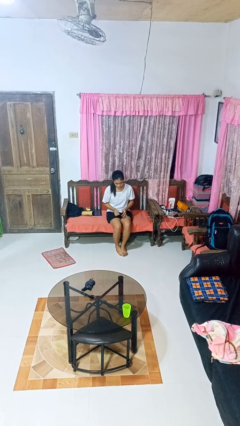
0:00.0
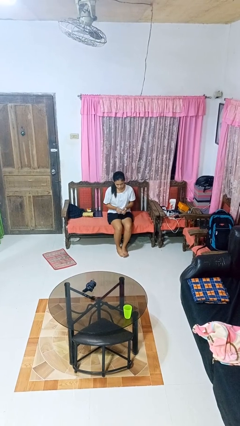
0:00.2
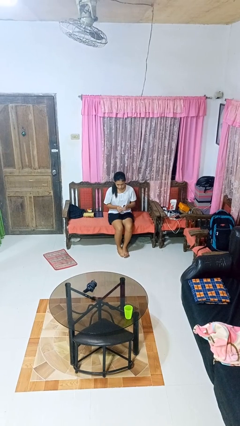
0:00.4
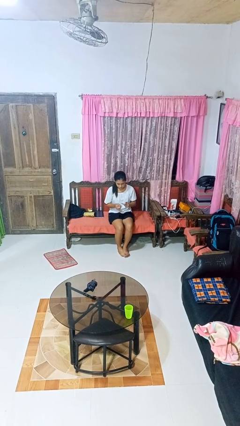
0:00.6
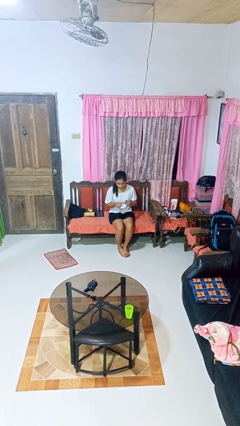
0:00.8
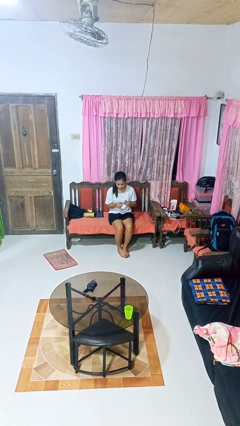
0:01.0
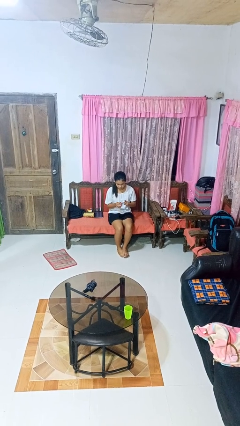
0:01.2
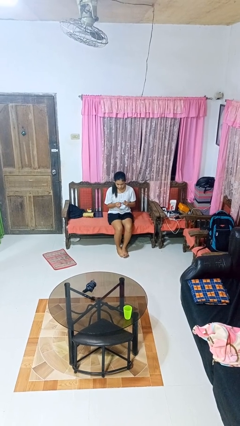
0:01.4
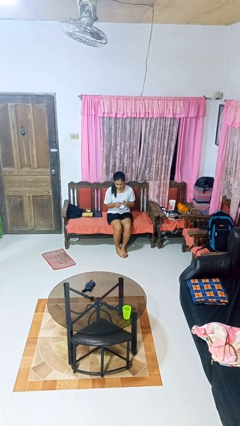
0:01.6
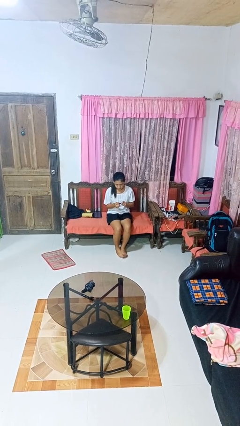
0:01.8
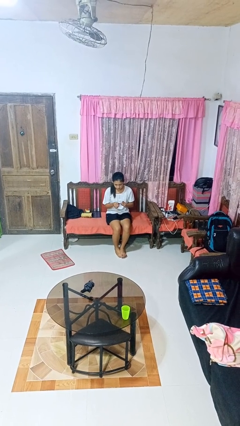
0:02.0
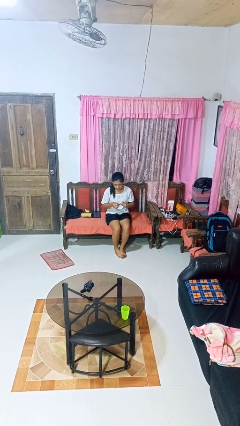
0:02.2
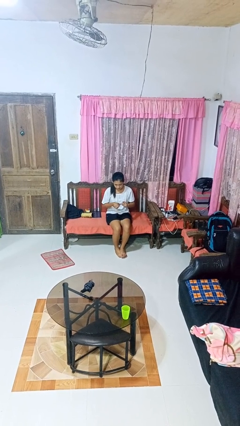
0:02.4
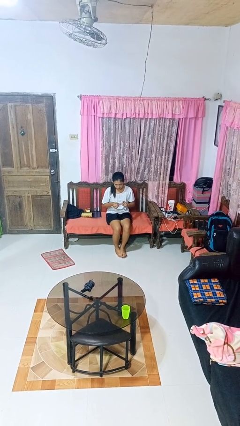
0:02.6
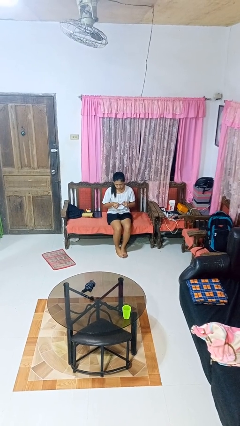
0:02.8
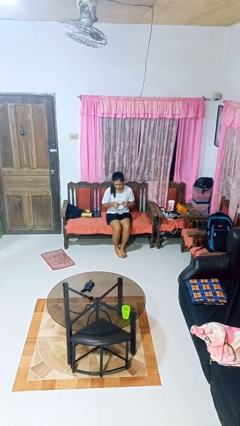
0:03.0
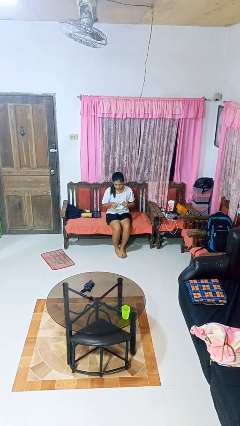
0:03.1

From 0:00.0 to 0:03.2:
person files fingernails

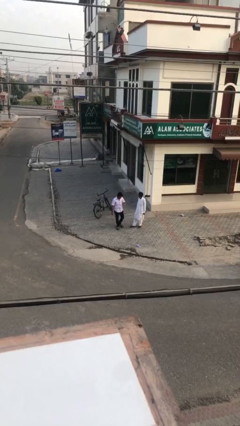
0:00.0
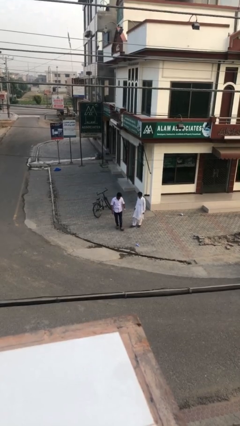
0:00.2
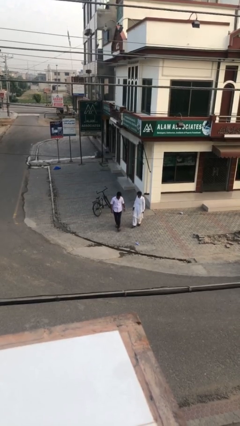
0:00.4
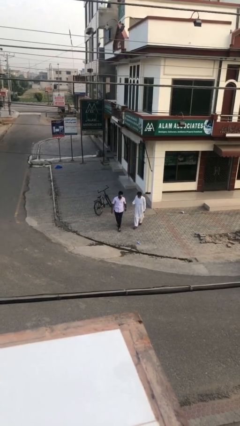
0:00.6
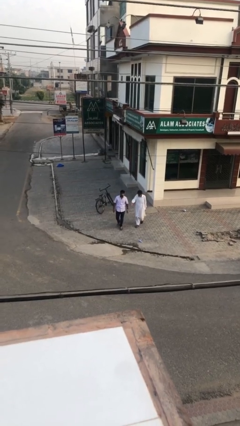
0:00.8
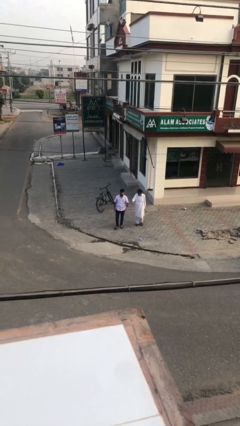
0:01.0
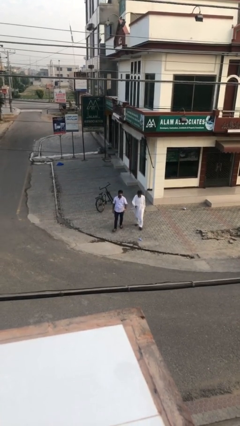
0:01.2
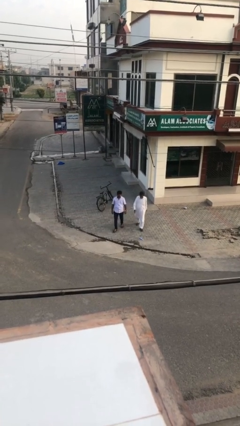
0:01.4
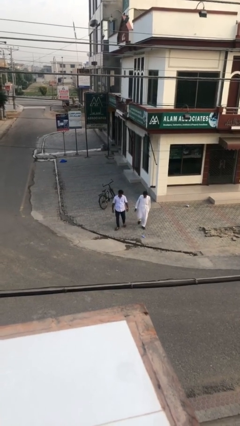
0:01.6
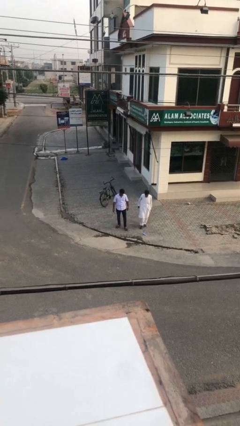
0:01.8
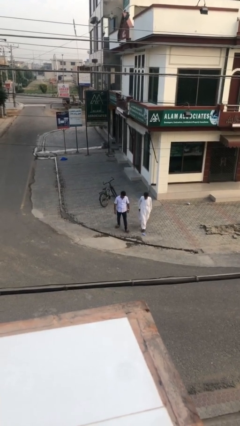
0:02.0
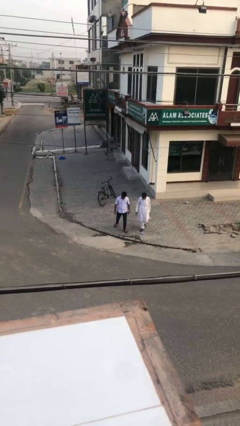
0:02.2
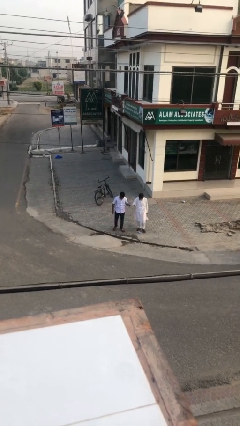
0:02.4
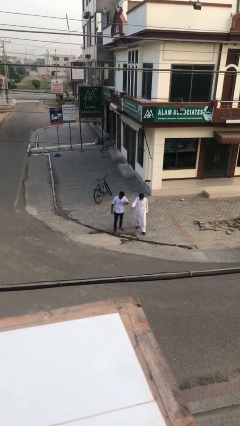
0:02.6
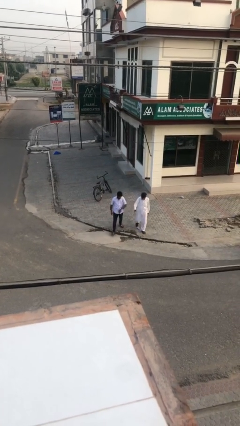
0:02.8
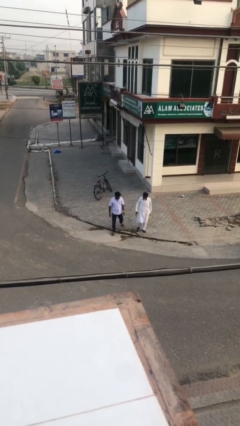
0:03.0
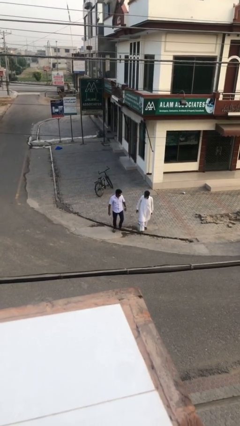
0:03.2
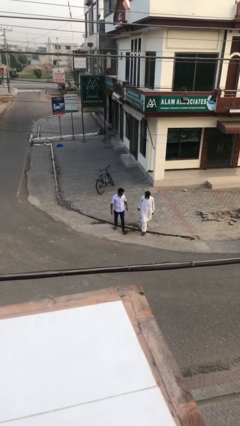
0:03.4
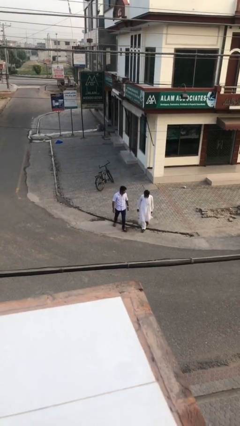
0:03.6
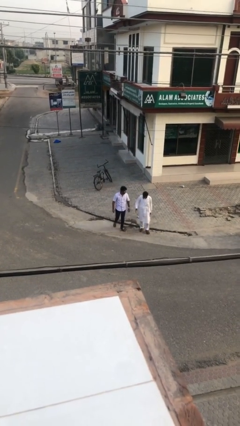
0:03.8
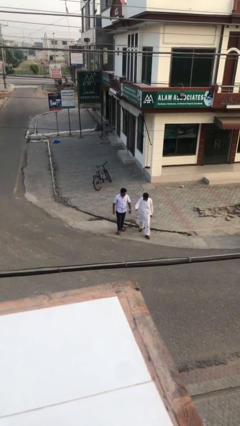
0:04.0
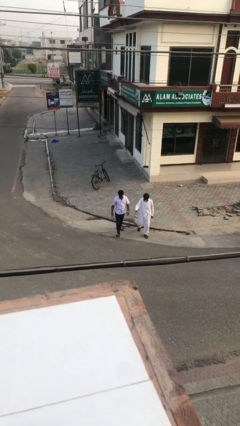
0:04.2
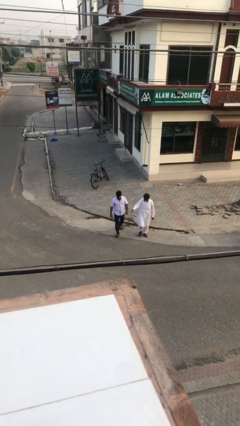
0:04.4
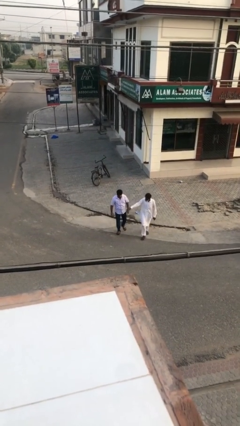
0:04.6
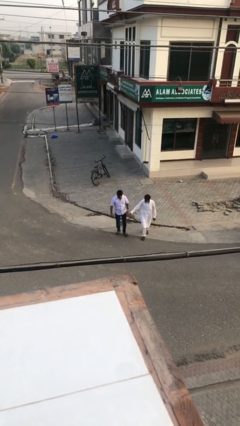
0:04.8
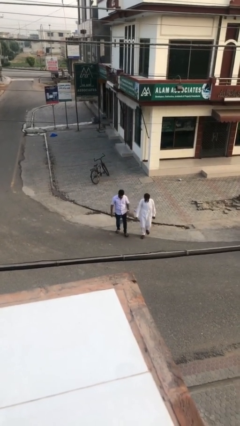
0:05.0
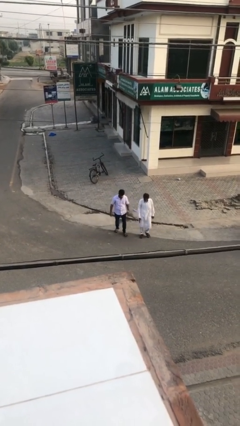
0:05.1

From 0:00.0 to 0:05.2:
person talks to person

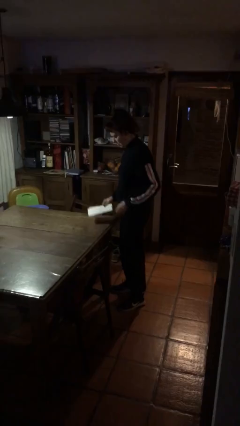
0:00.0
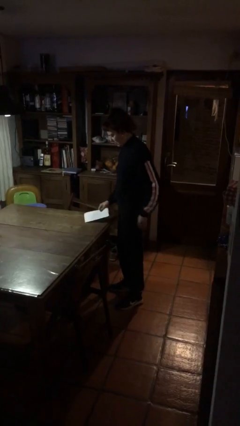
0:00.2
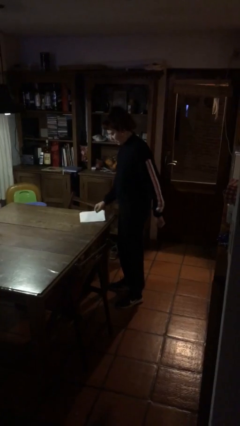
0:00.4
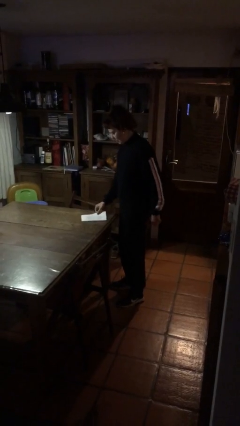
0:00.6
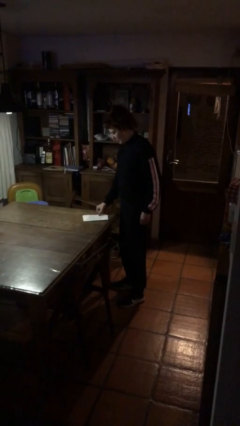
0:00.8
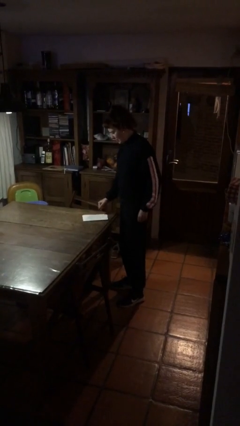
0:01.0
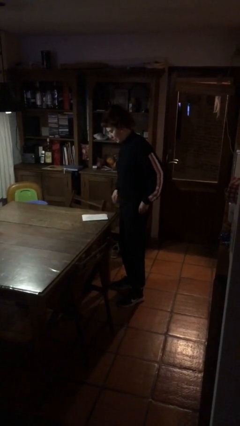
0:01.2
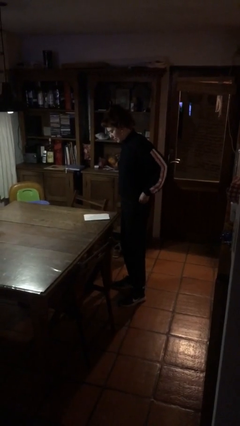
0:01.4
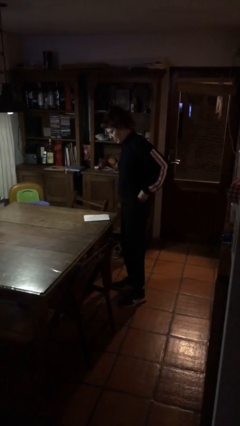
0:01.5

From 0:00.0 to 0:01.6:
person puts down object on table

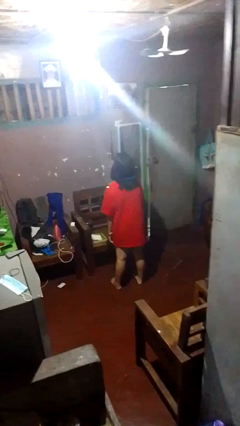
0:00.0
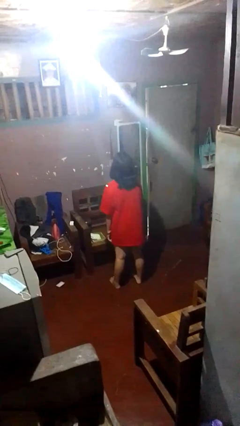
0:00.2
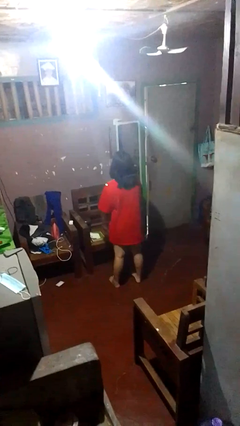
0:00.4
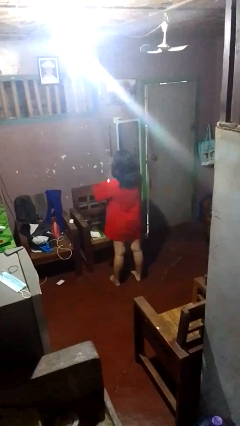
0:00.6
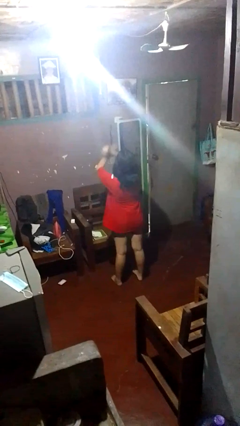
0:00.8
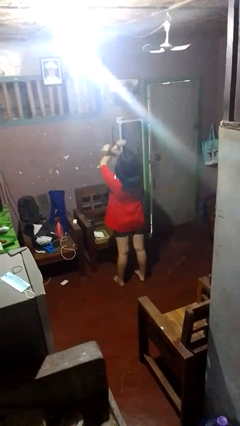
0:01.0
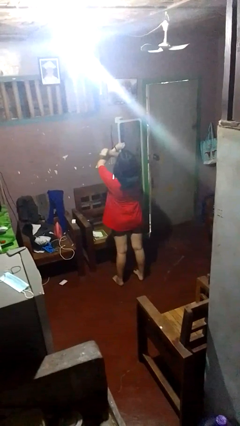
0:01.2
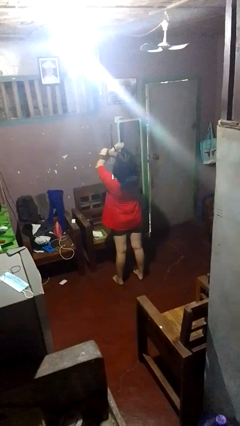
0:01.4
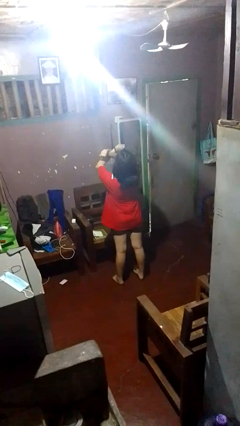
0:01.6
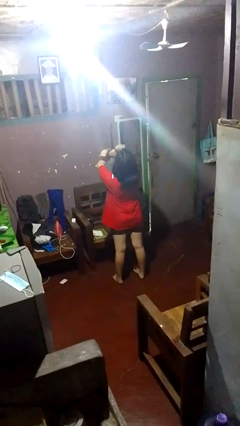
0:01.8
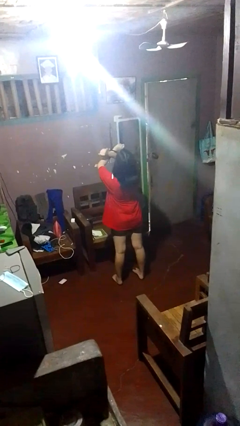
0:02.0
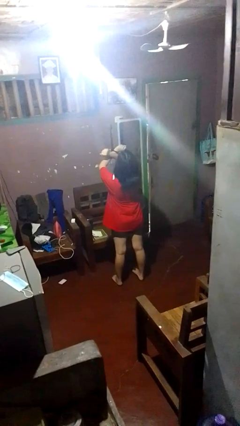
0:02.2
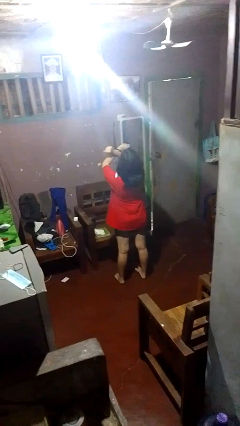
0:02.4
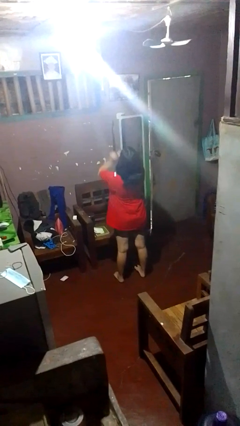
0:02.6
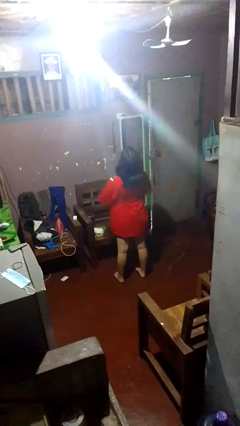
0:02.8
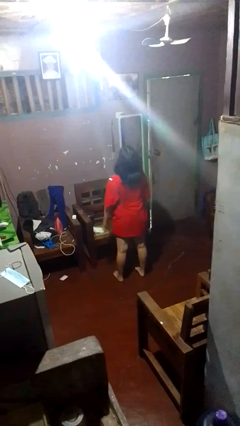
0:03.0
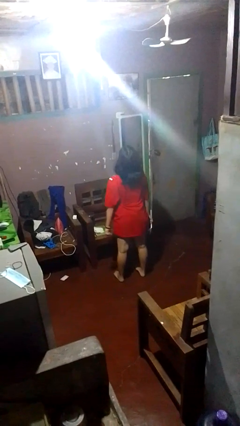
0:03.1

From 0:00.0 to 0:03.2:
person gestures arms x

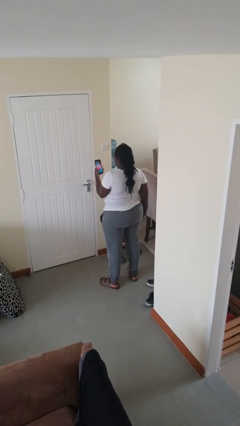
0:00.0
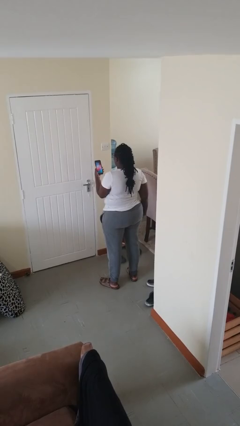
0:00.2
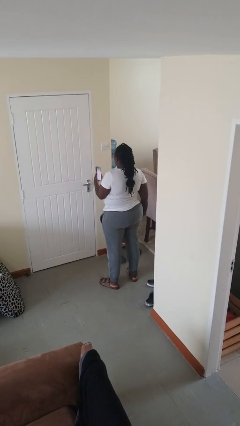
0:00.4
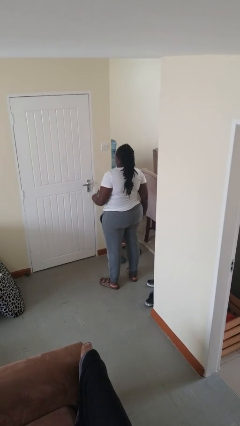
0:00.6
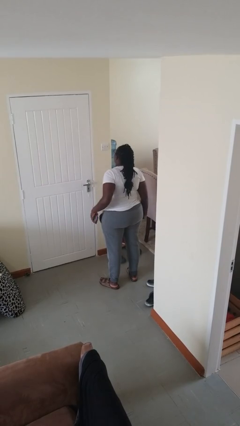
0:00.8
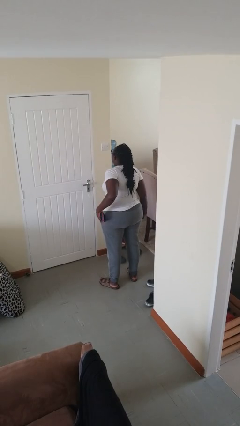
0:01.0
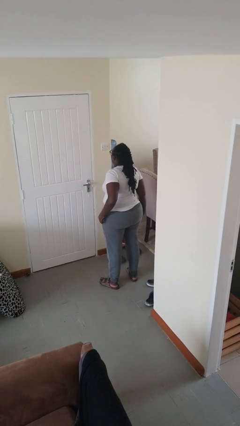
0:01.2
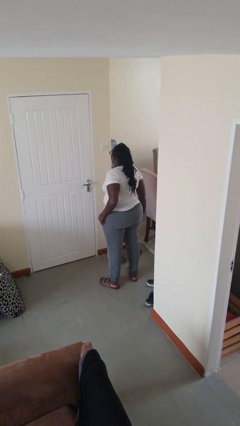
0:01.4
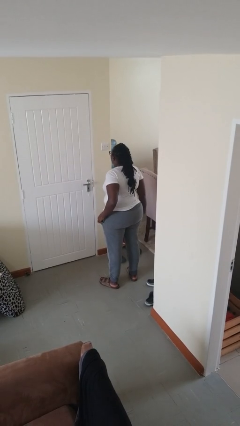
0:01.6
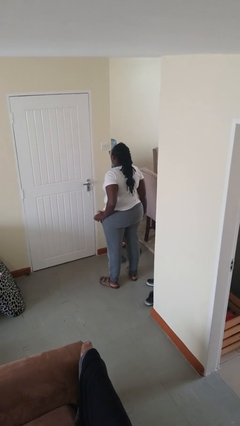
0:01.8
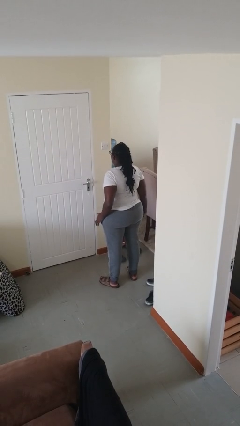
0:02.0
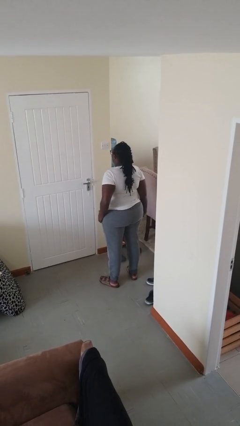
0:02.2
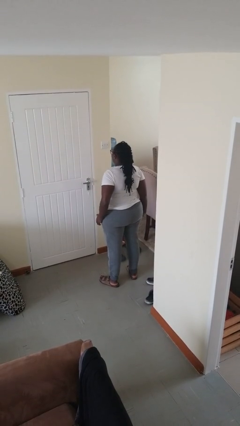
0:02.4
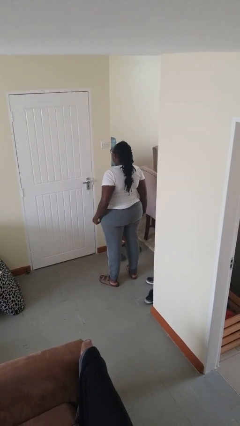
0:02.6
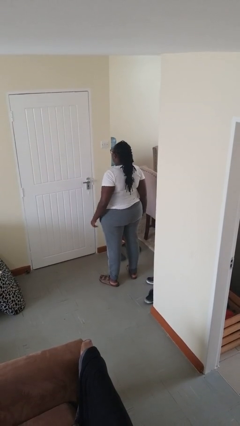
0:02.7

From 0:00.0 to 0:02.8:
person puts phone into pocket

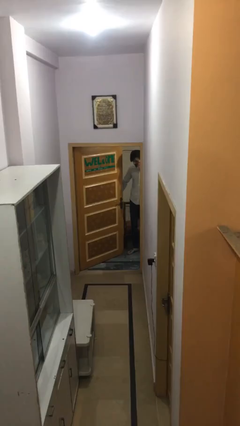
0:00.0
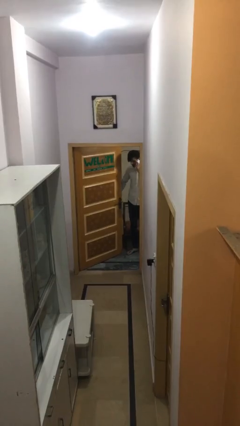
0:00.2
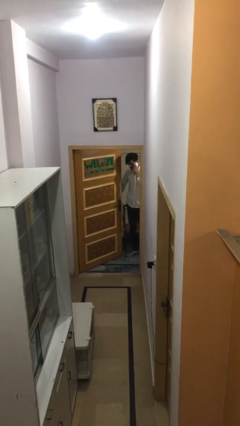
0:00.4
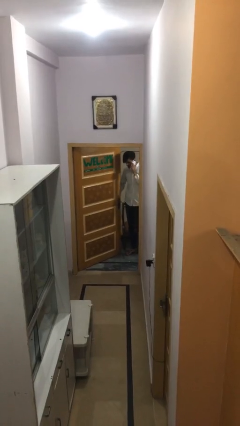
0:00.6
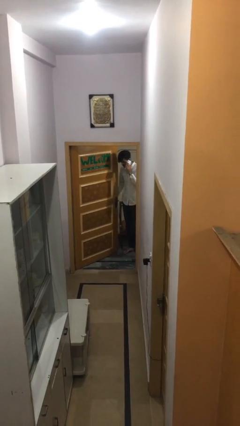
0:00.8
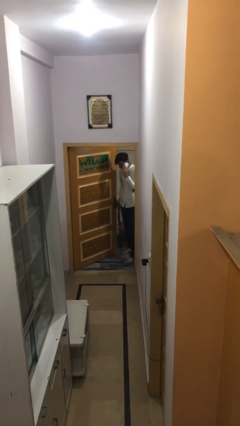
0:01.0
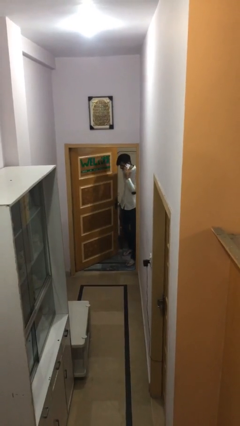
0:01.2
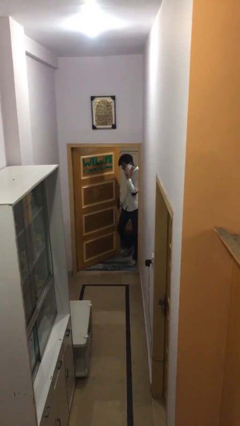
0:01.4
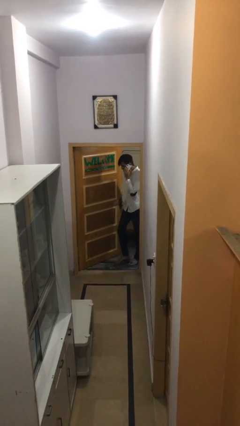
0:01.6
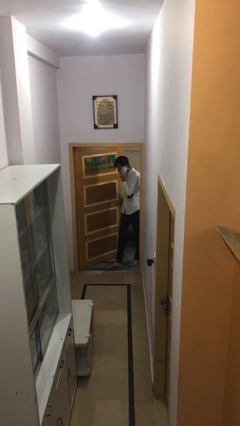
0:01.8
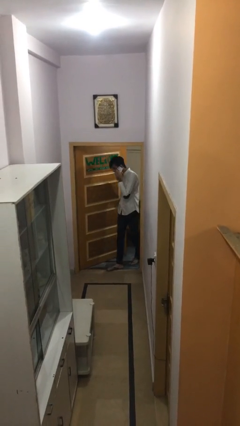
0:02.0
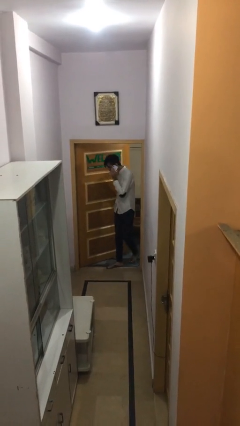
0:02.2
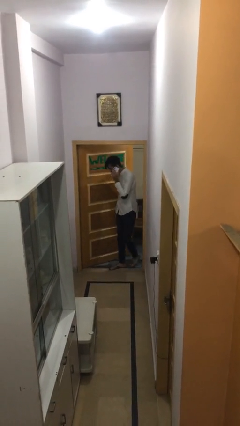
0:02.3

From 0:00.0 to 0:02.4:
person enters scene through structure
